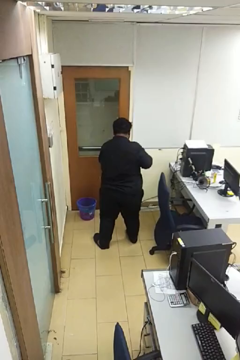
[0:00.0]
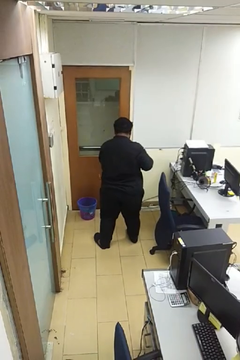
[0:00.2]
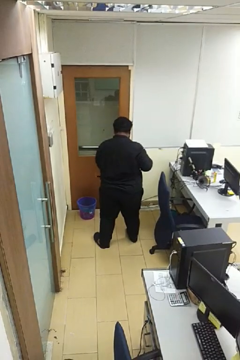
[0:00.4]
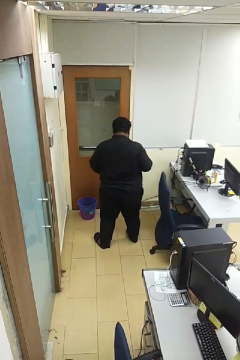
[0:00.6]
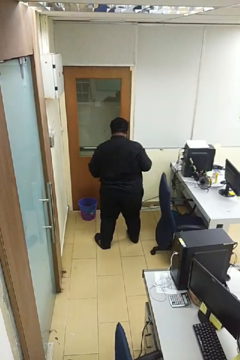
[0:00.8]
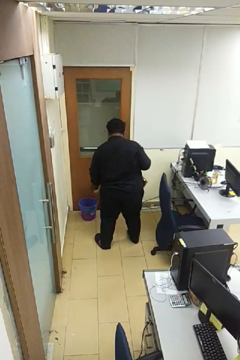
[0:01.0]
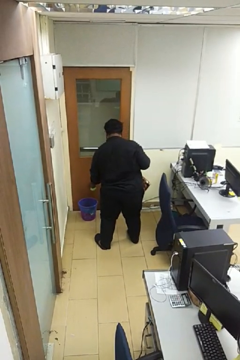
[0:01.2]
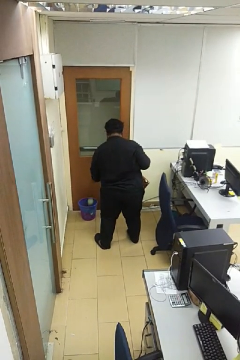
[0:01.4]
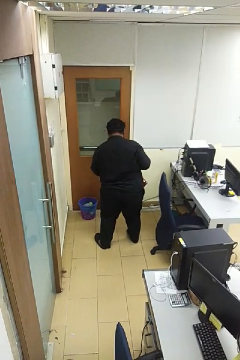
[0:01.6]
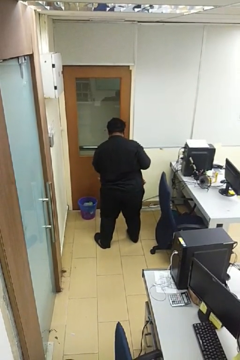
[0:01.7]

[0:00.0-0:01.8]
person discards trash

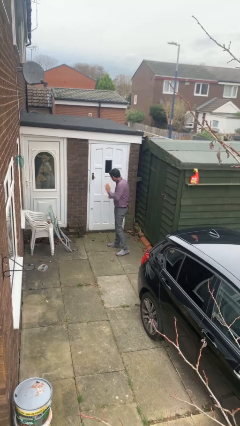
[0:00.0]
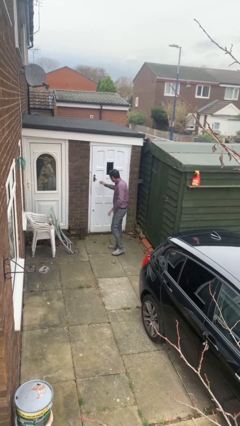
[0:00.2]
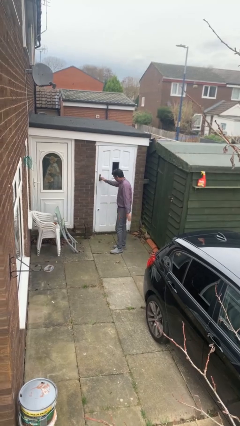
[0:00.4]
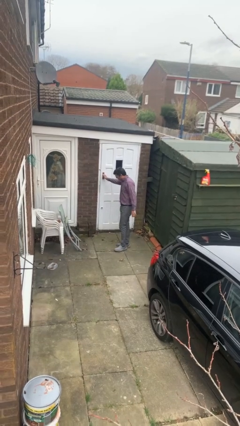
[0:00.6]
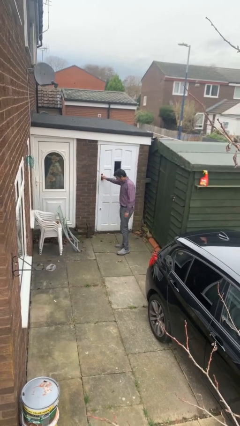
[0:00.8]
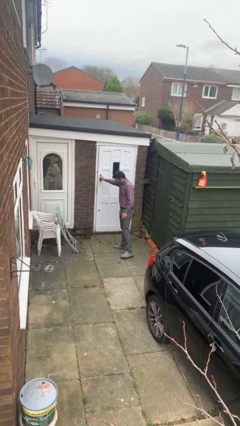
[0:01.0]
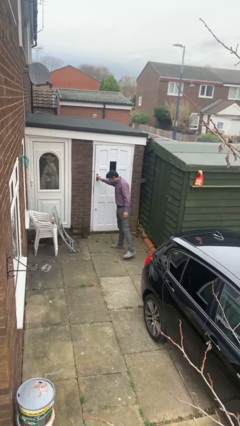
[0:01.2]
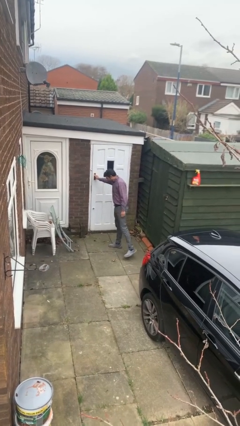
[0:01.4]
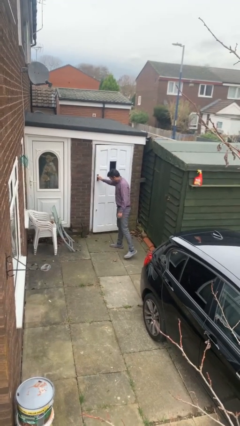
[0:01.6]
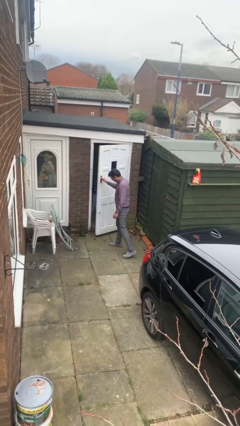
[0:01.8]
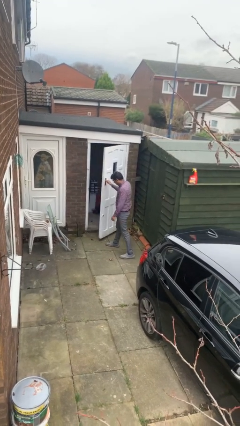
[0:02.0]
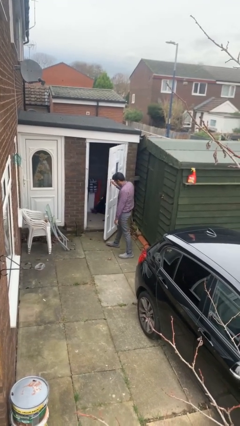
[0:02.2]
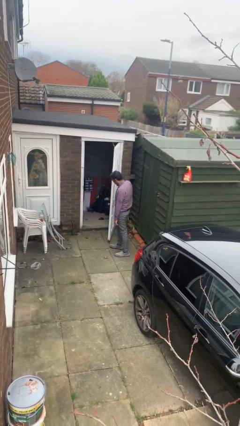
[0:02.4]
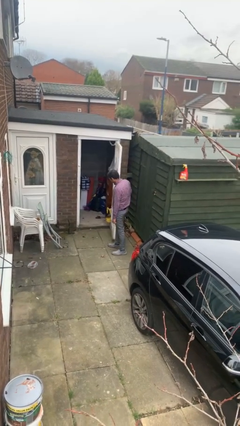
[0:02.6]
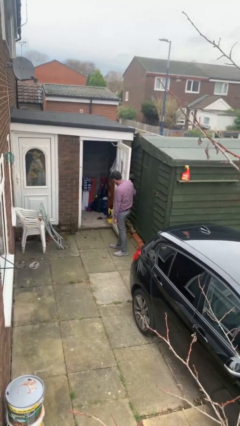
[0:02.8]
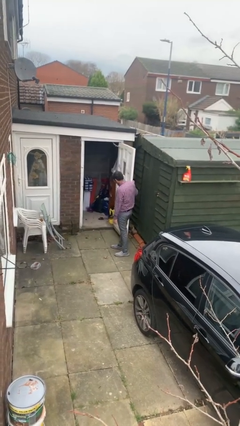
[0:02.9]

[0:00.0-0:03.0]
person opens facility door

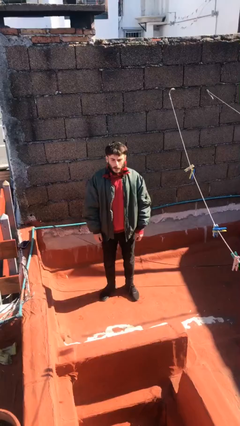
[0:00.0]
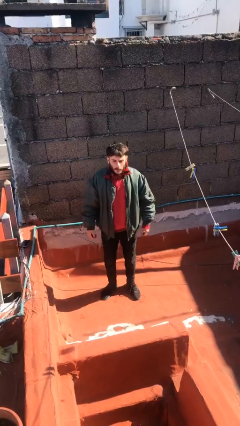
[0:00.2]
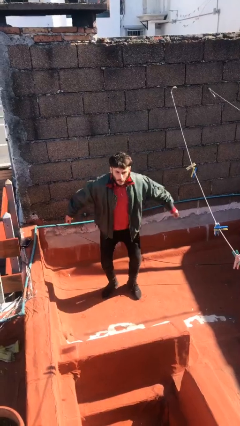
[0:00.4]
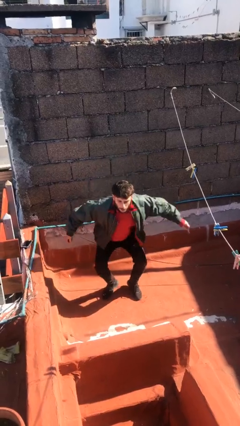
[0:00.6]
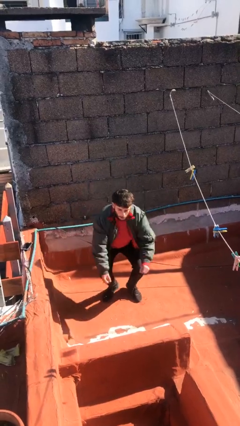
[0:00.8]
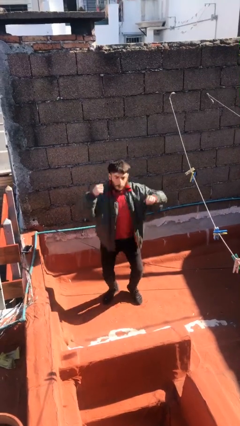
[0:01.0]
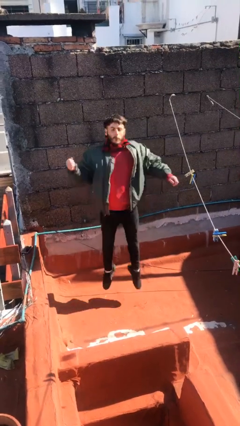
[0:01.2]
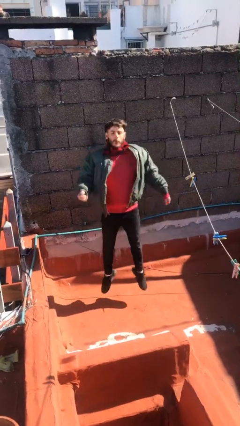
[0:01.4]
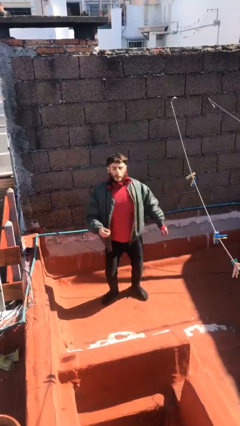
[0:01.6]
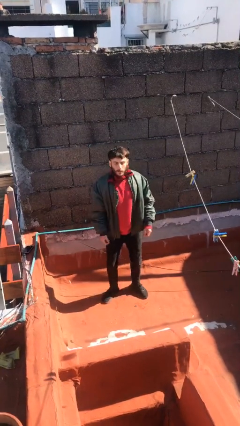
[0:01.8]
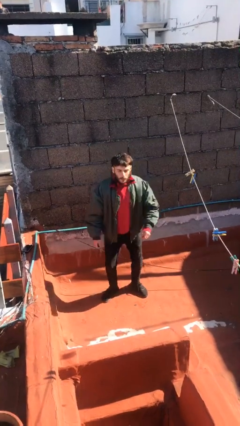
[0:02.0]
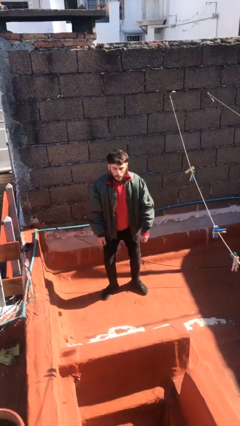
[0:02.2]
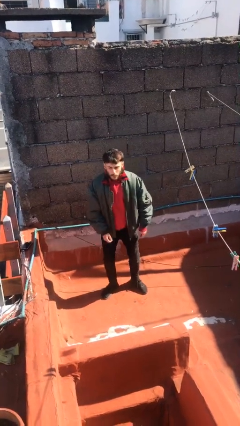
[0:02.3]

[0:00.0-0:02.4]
person jumps

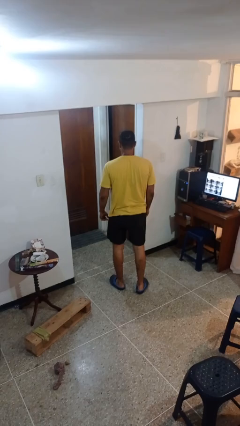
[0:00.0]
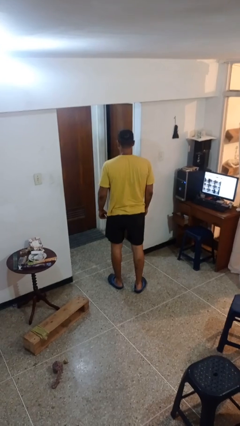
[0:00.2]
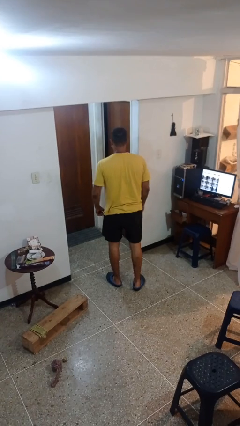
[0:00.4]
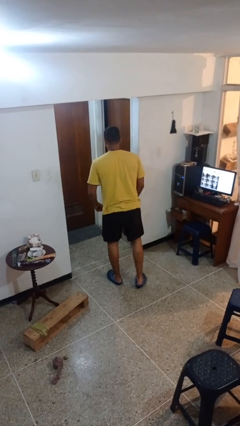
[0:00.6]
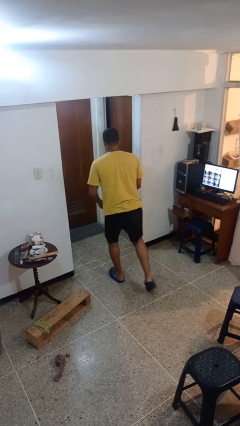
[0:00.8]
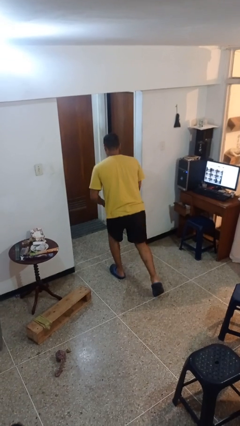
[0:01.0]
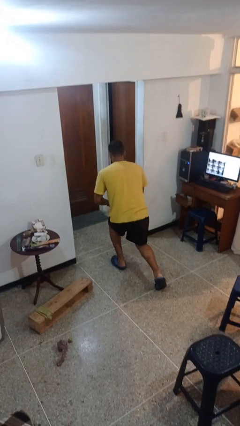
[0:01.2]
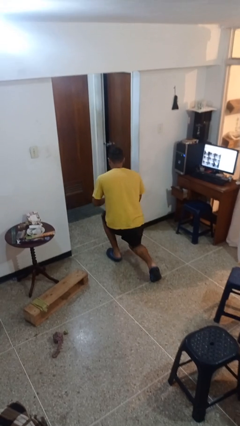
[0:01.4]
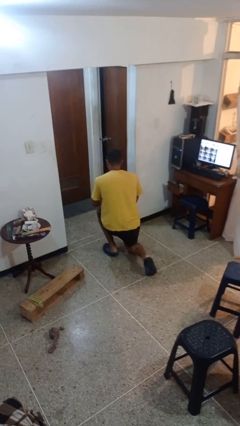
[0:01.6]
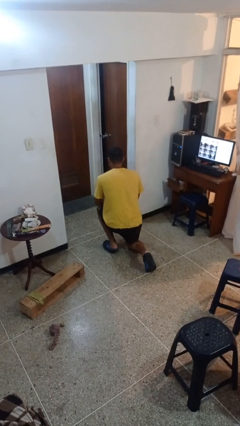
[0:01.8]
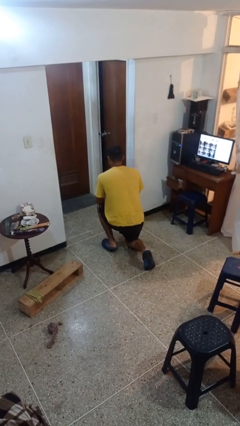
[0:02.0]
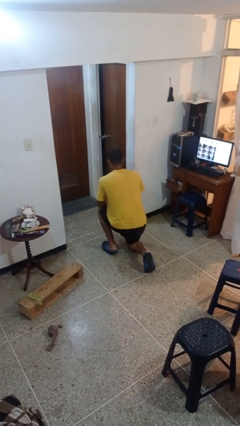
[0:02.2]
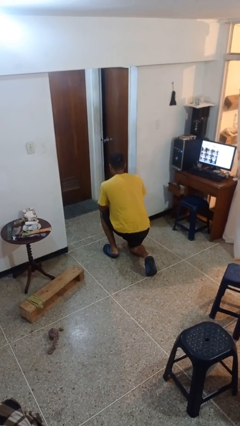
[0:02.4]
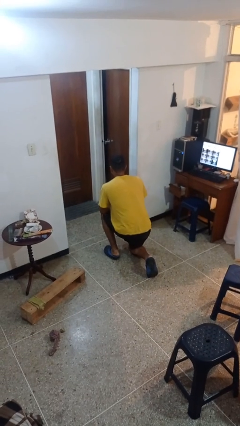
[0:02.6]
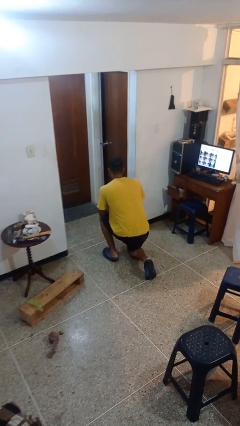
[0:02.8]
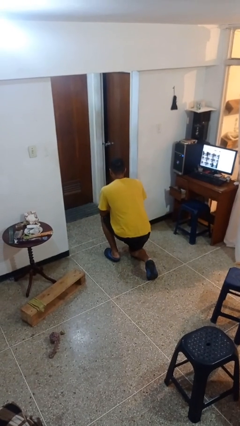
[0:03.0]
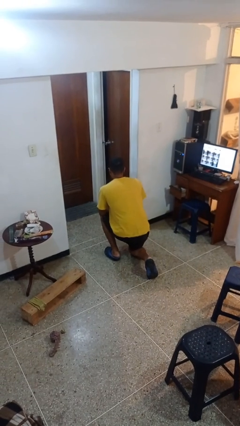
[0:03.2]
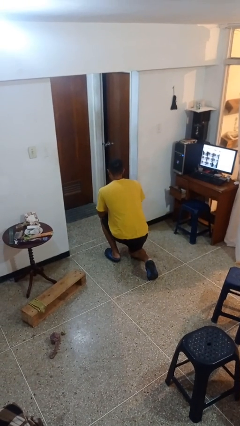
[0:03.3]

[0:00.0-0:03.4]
person kneels

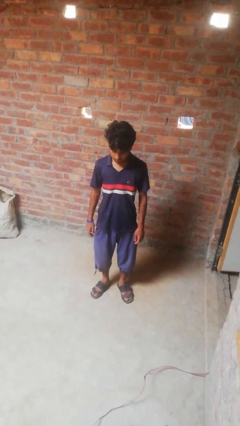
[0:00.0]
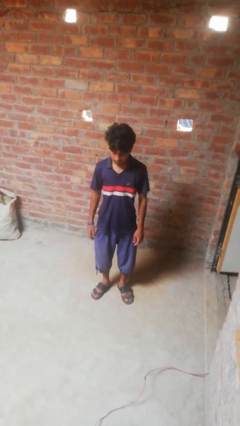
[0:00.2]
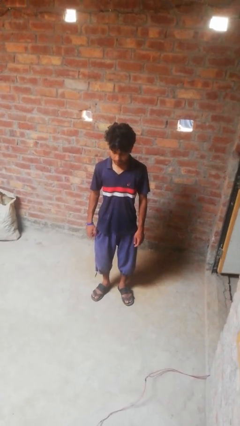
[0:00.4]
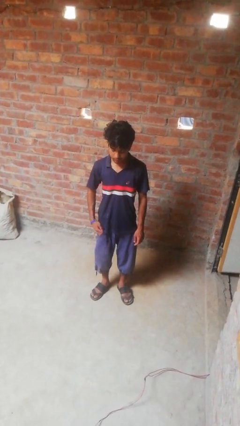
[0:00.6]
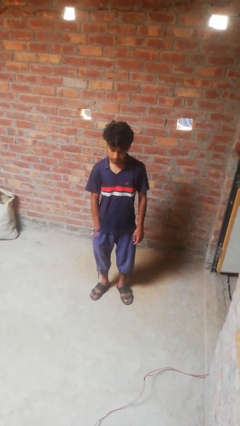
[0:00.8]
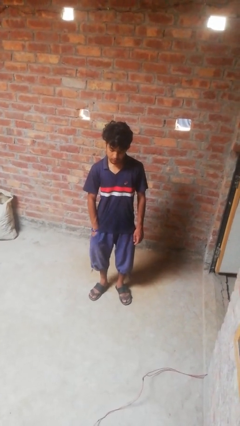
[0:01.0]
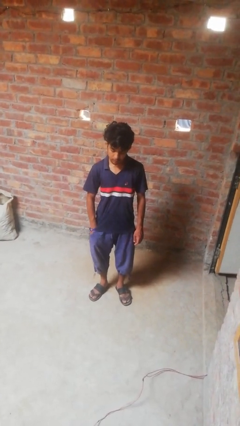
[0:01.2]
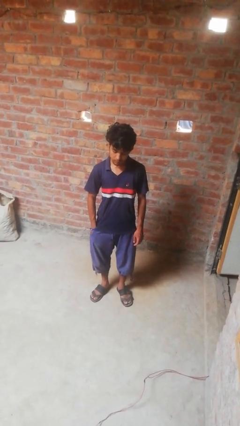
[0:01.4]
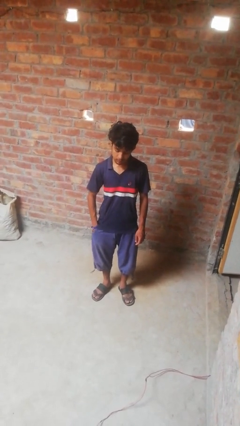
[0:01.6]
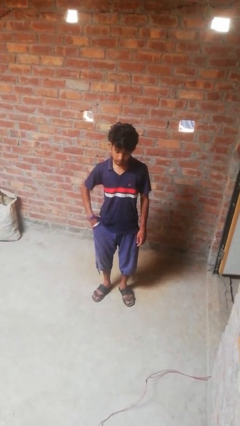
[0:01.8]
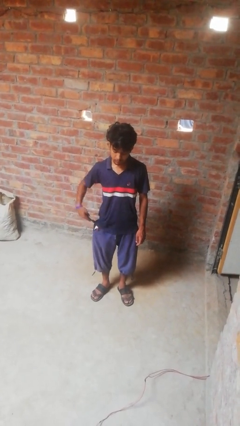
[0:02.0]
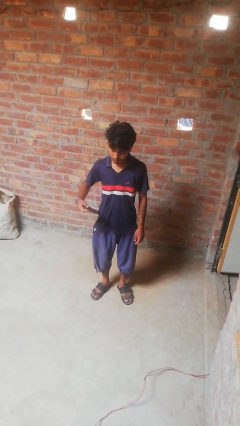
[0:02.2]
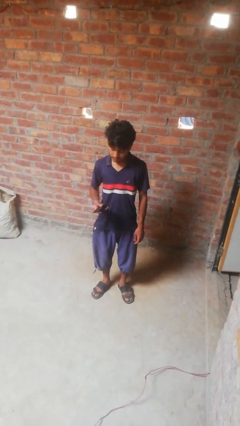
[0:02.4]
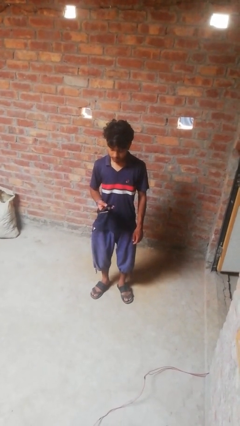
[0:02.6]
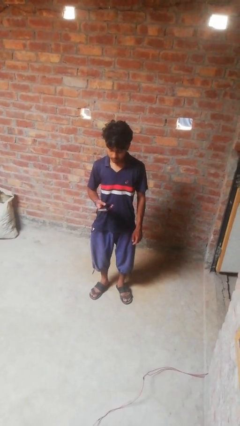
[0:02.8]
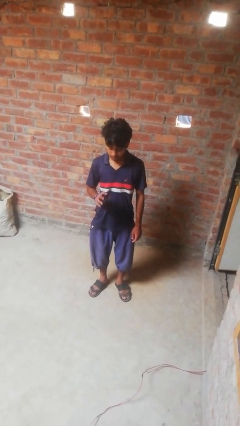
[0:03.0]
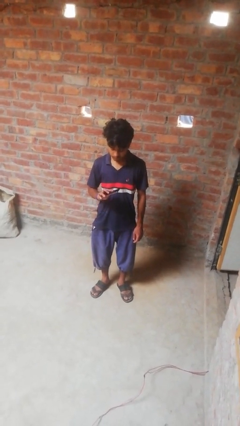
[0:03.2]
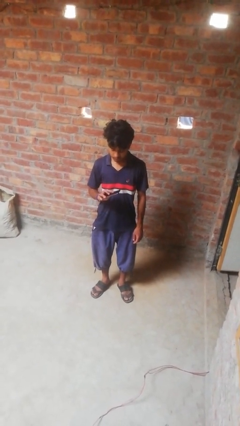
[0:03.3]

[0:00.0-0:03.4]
person takes phone from pocket

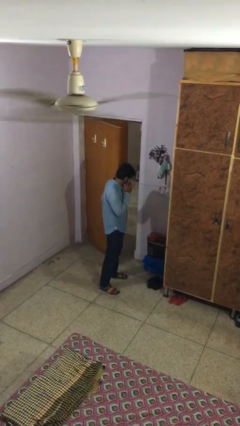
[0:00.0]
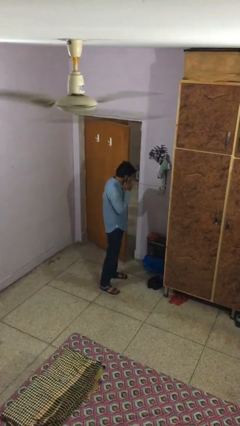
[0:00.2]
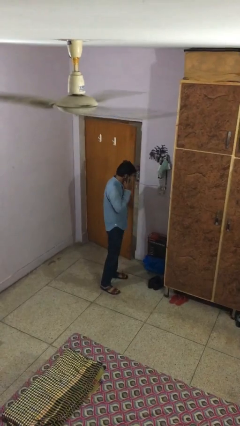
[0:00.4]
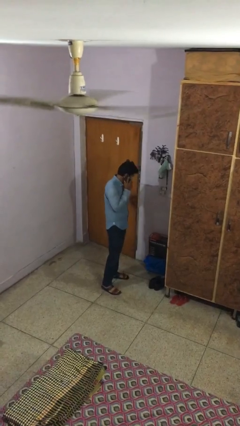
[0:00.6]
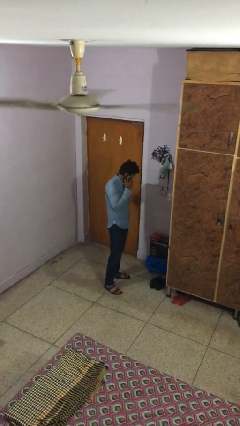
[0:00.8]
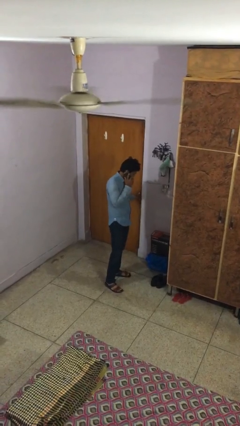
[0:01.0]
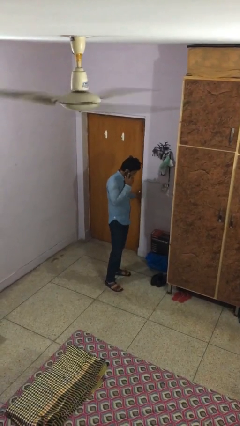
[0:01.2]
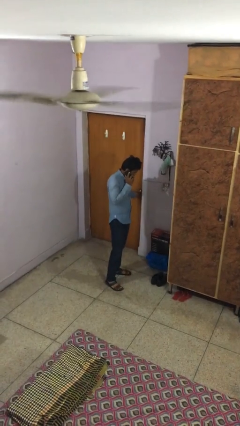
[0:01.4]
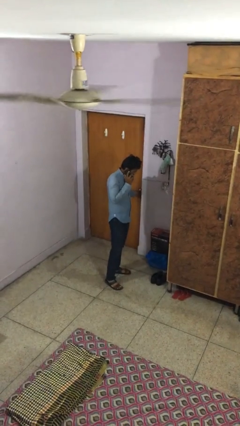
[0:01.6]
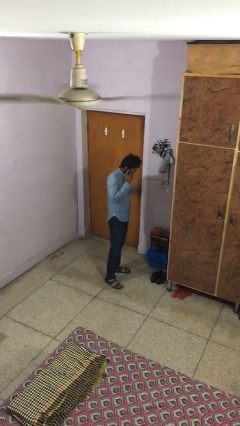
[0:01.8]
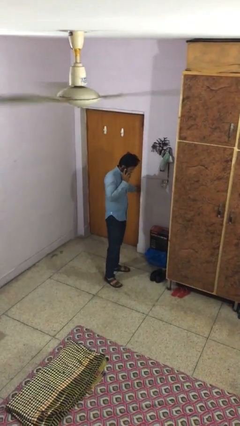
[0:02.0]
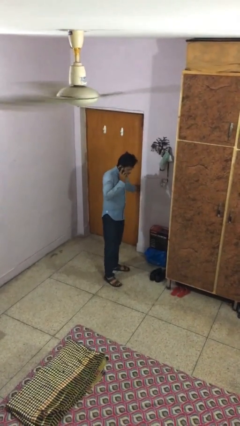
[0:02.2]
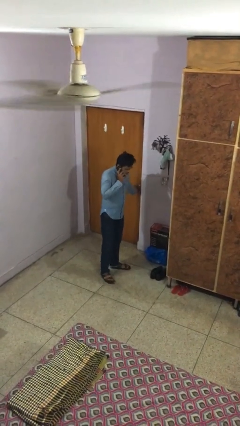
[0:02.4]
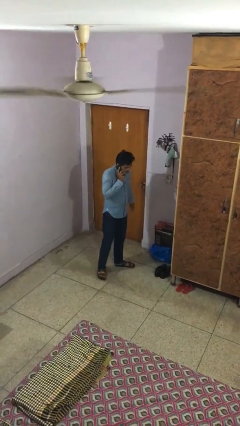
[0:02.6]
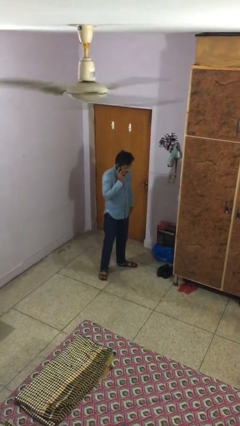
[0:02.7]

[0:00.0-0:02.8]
person closes facility door
